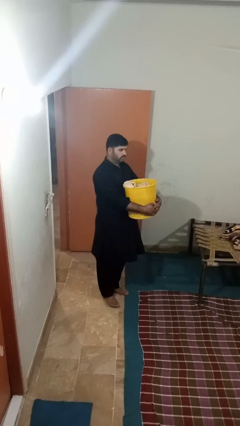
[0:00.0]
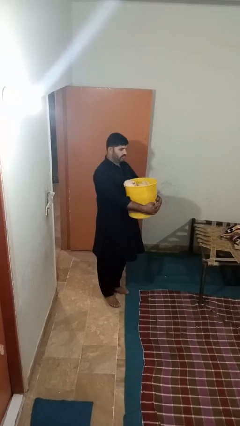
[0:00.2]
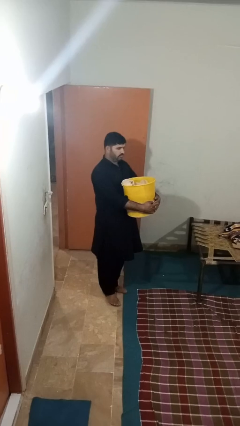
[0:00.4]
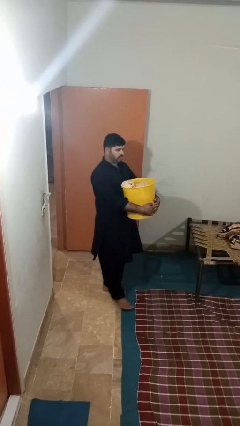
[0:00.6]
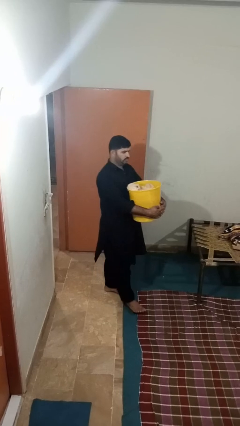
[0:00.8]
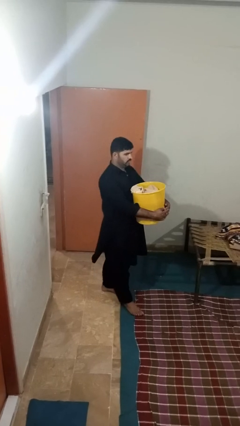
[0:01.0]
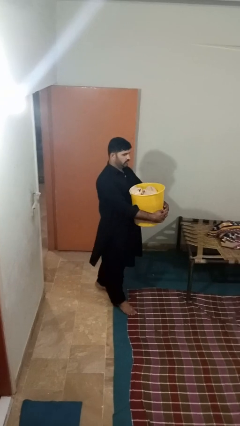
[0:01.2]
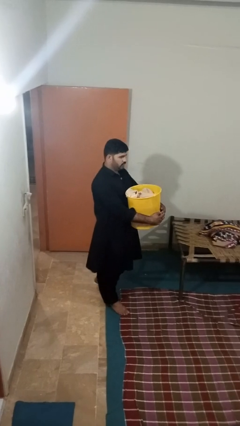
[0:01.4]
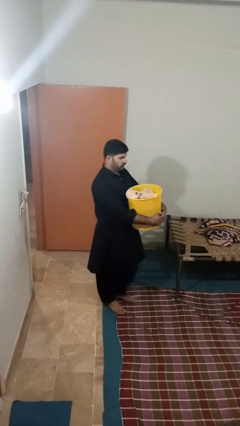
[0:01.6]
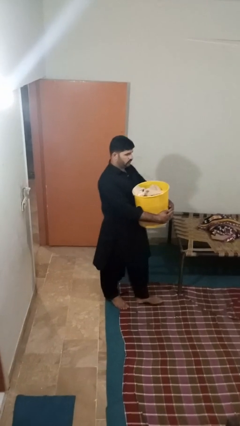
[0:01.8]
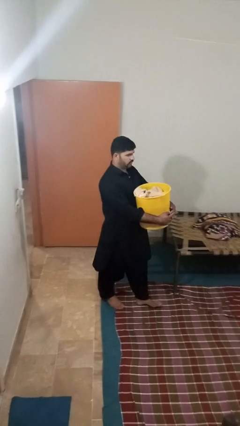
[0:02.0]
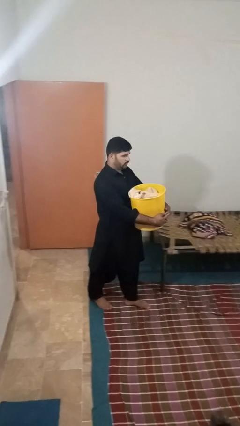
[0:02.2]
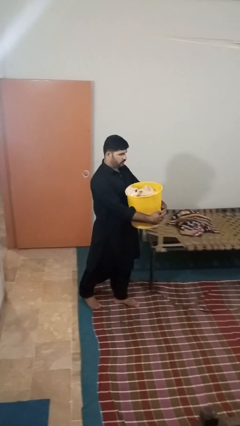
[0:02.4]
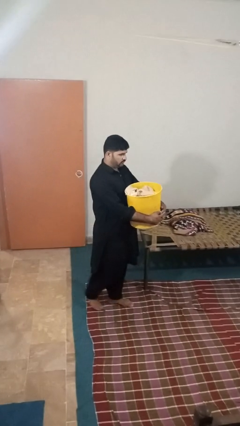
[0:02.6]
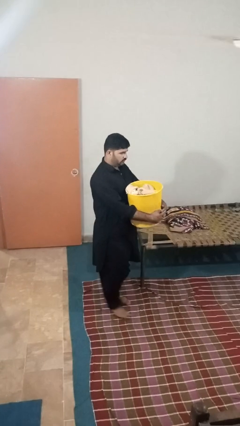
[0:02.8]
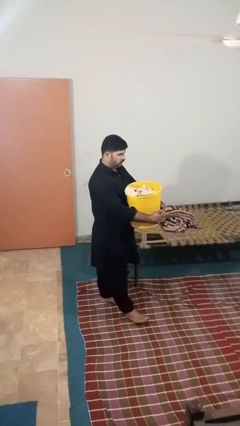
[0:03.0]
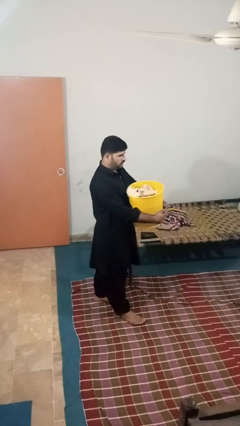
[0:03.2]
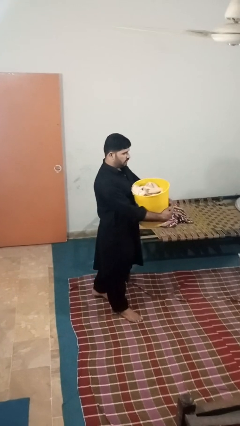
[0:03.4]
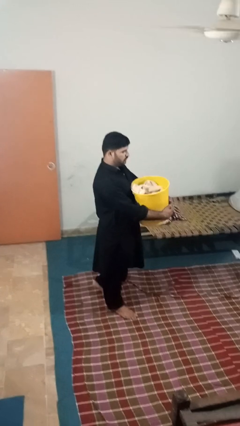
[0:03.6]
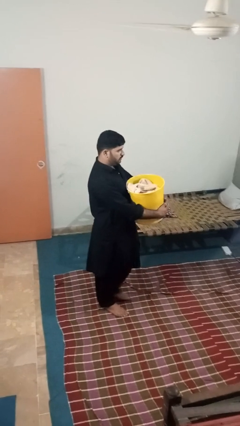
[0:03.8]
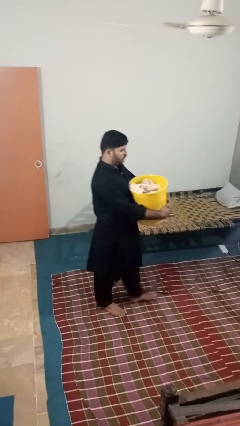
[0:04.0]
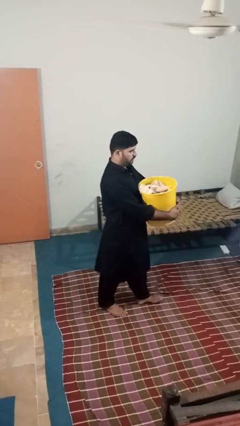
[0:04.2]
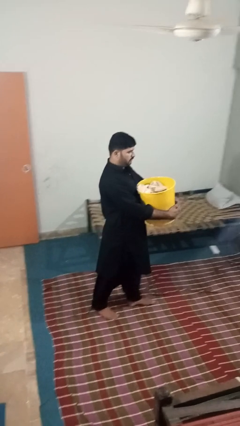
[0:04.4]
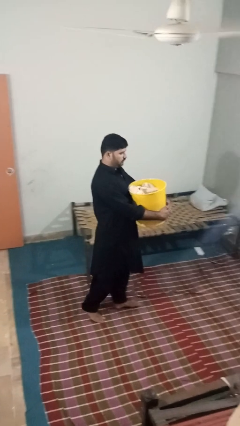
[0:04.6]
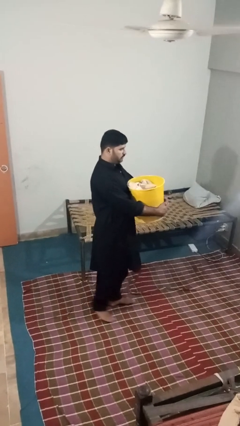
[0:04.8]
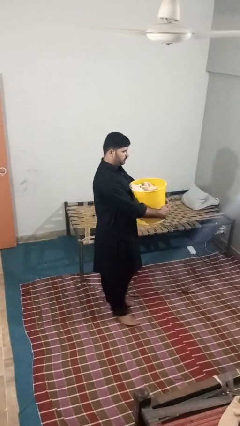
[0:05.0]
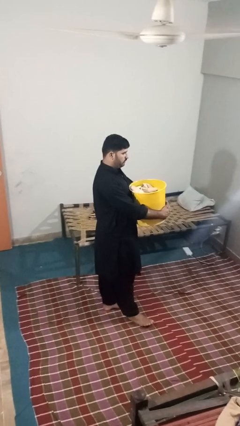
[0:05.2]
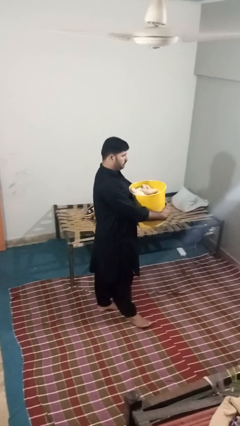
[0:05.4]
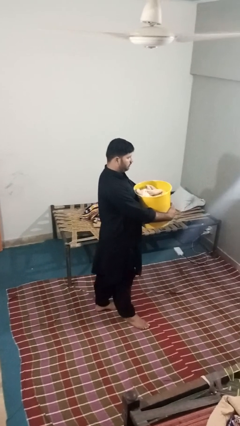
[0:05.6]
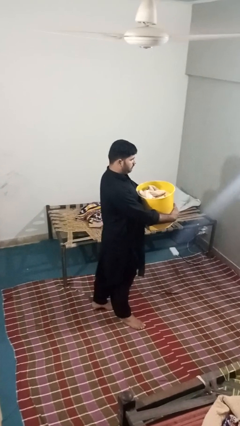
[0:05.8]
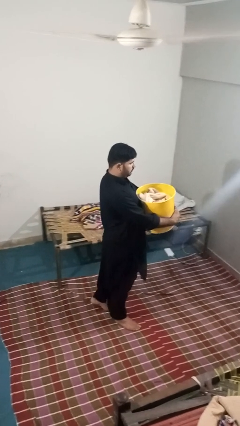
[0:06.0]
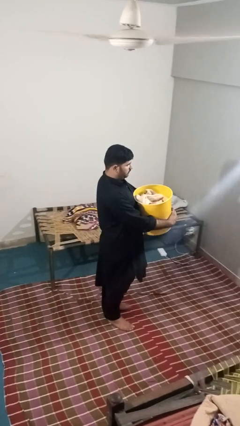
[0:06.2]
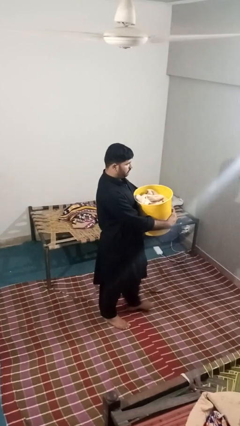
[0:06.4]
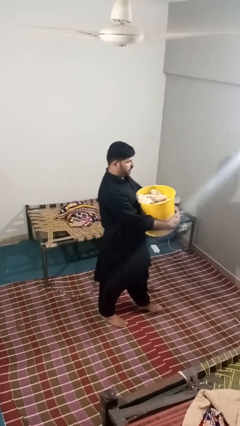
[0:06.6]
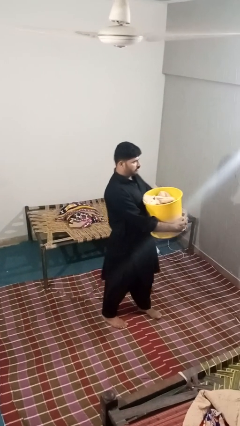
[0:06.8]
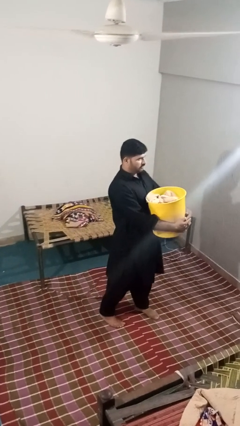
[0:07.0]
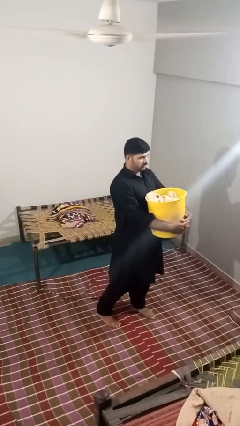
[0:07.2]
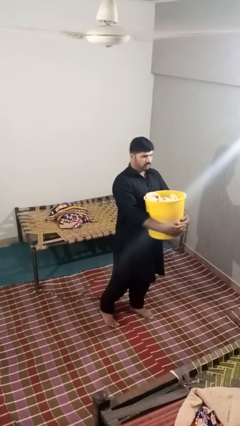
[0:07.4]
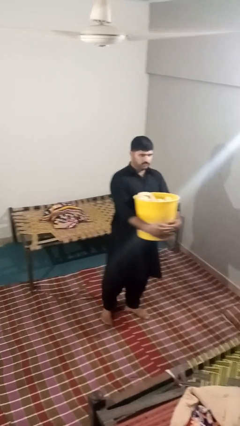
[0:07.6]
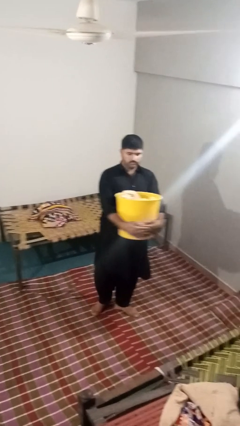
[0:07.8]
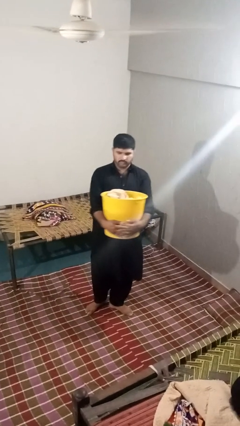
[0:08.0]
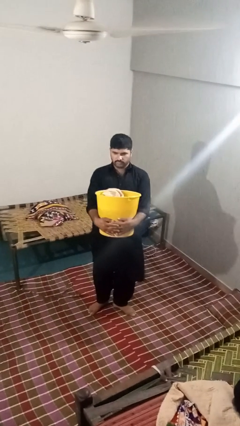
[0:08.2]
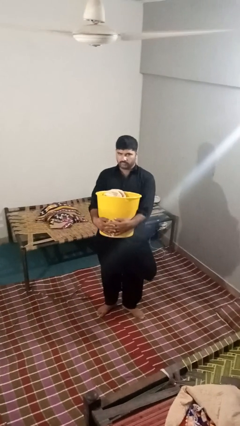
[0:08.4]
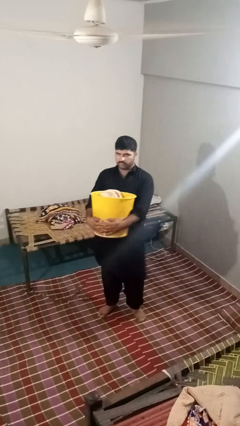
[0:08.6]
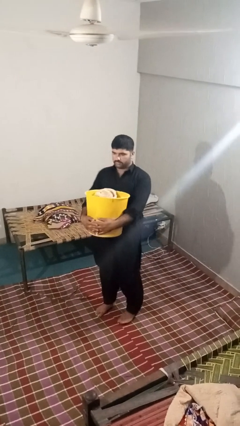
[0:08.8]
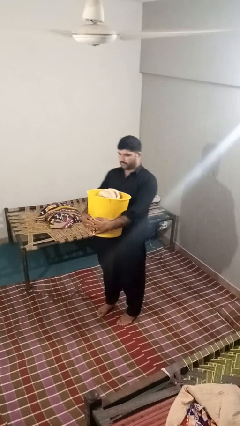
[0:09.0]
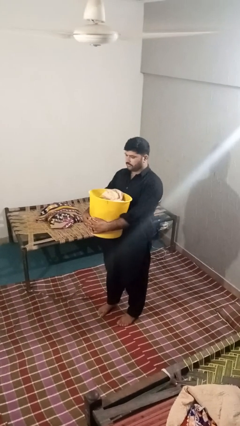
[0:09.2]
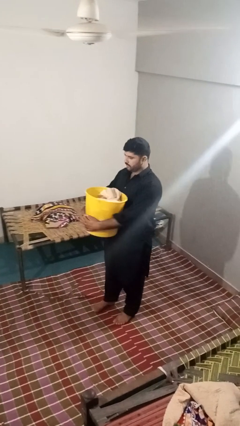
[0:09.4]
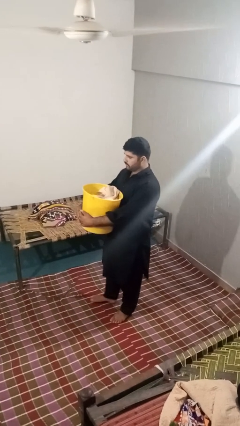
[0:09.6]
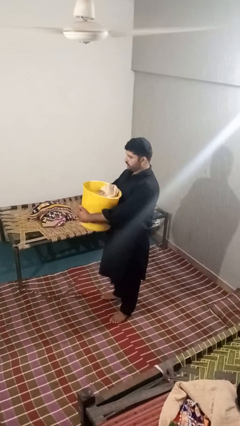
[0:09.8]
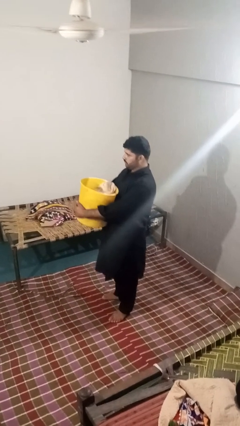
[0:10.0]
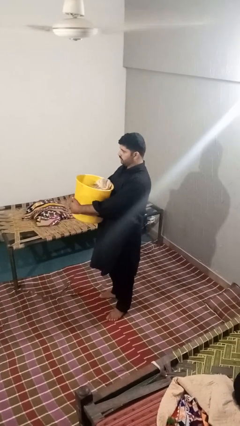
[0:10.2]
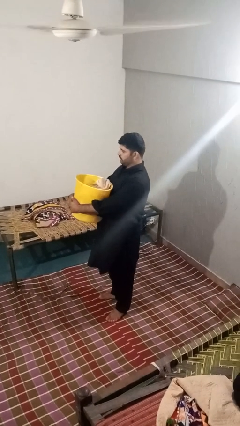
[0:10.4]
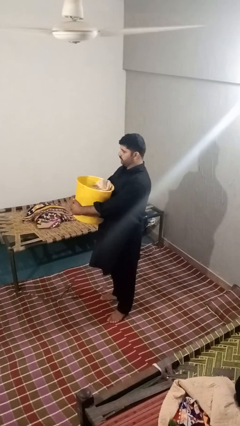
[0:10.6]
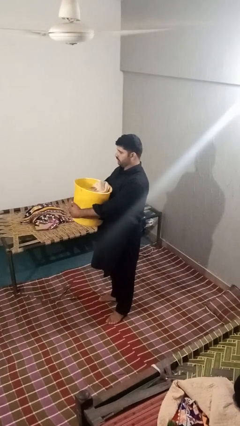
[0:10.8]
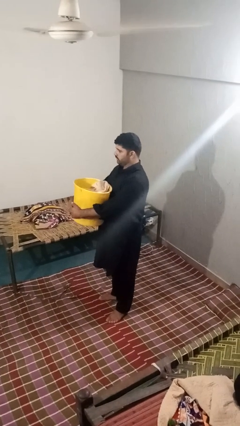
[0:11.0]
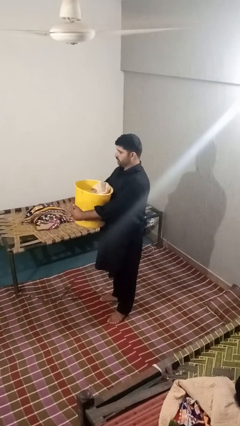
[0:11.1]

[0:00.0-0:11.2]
person carries laundry basket

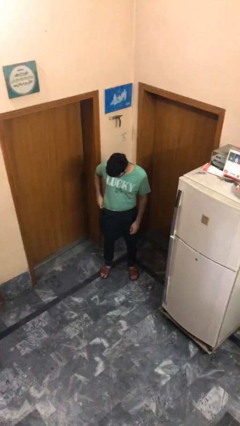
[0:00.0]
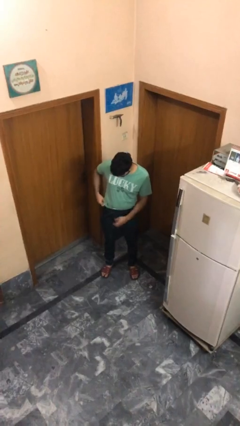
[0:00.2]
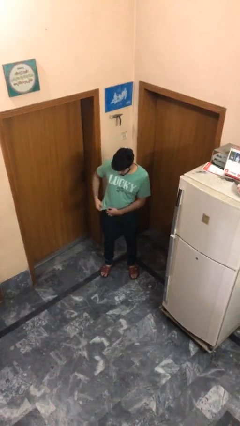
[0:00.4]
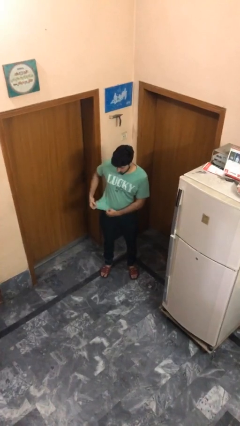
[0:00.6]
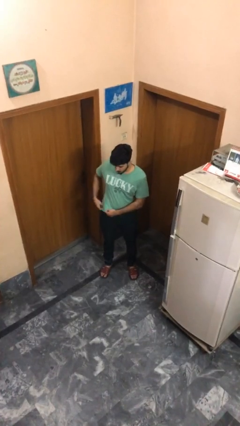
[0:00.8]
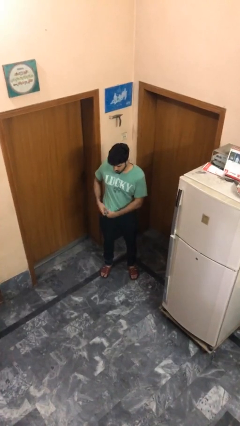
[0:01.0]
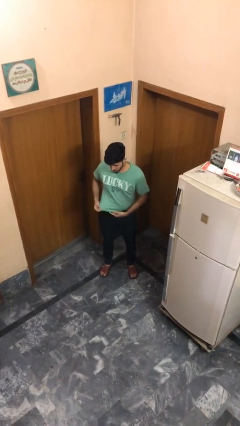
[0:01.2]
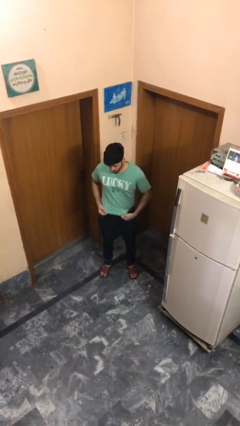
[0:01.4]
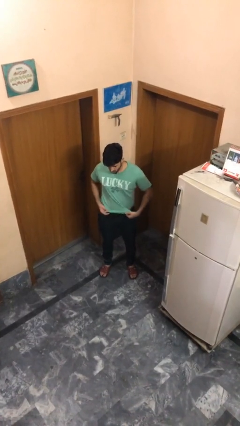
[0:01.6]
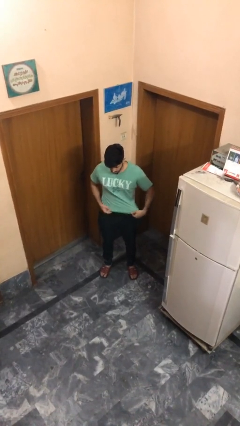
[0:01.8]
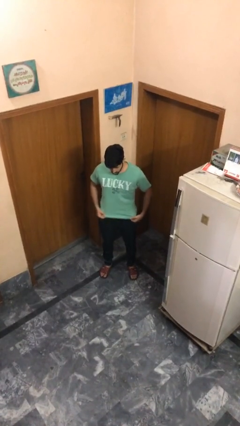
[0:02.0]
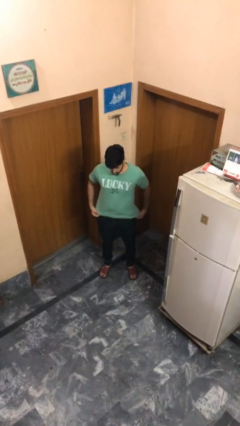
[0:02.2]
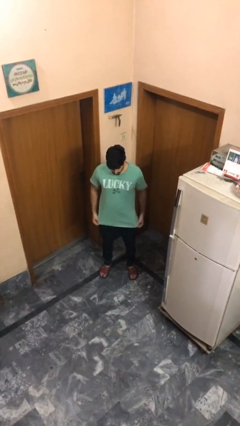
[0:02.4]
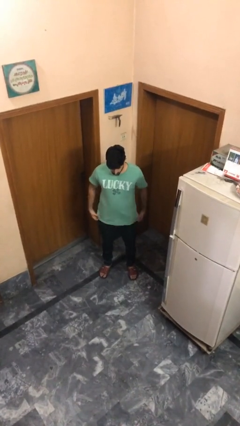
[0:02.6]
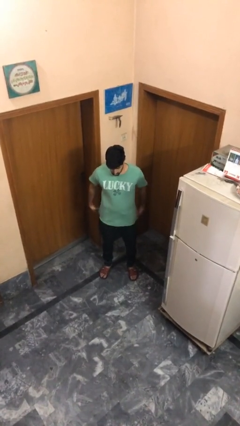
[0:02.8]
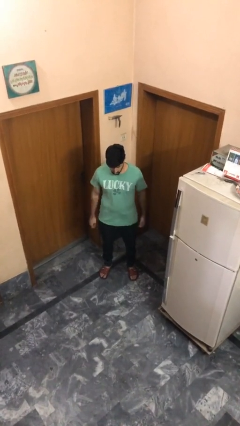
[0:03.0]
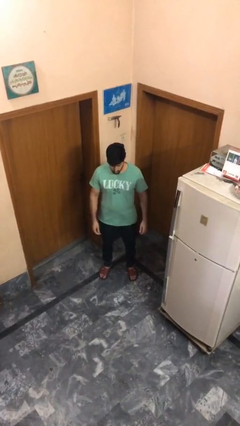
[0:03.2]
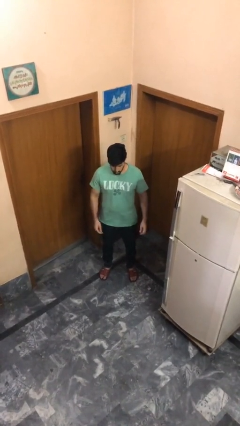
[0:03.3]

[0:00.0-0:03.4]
person untucks shirt

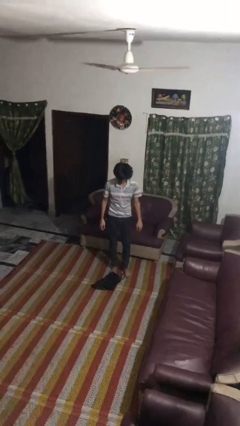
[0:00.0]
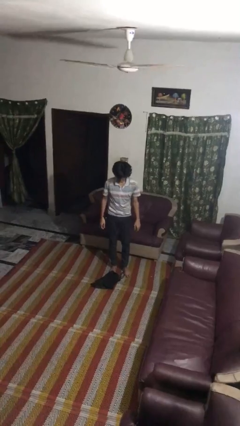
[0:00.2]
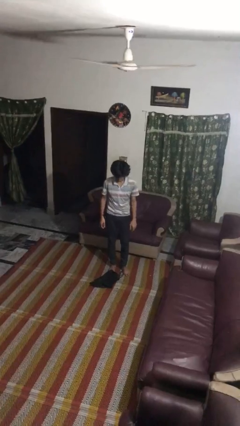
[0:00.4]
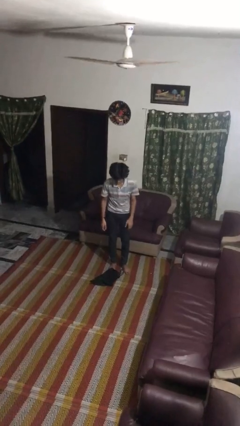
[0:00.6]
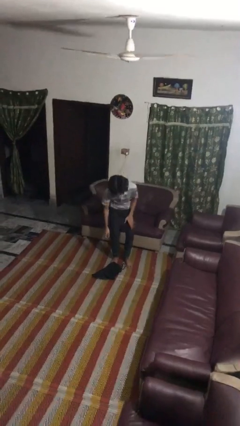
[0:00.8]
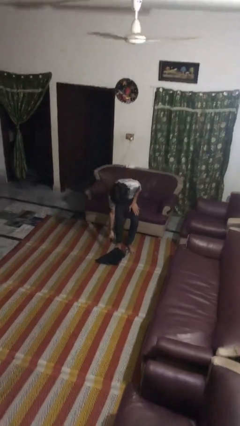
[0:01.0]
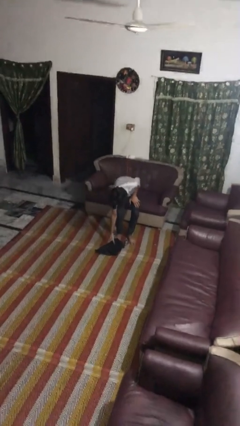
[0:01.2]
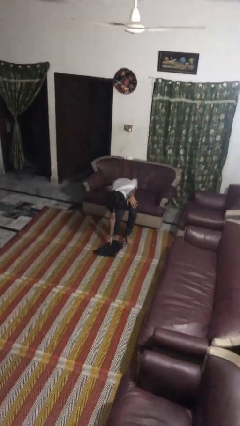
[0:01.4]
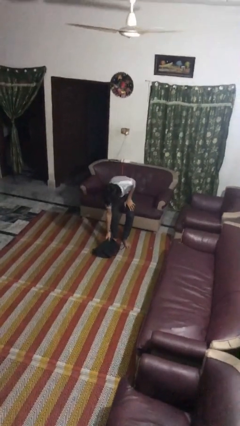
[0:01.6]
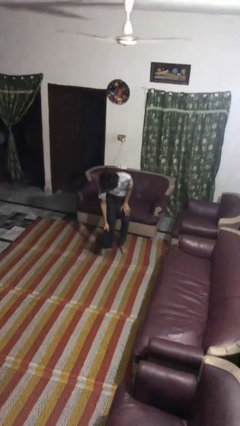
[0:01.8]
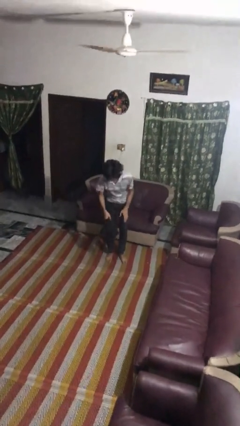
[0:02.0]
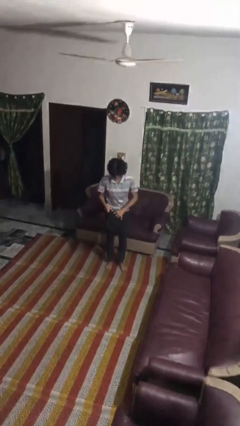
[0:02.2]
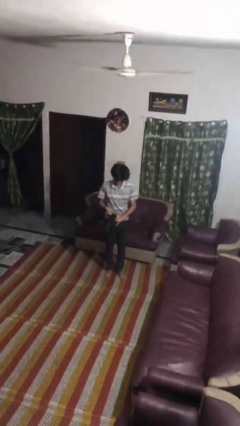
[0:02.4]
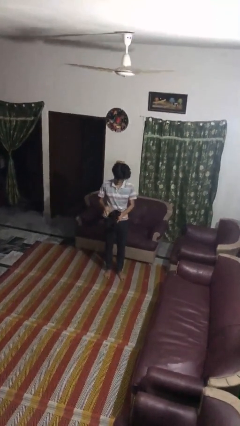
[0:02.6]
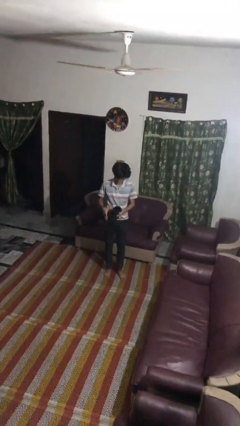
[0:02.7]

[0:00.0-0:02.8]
person picks up object from floor

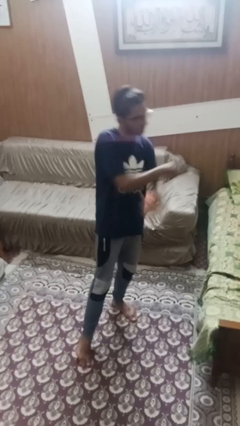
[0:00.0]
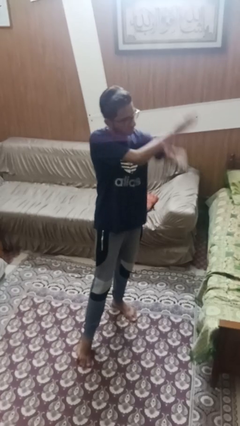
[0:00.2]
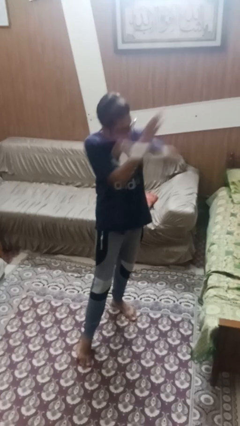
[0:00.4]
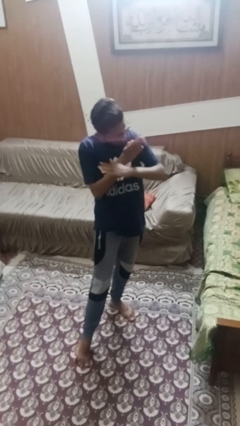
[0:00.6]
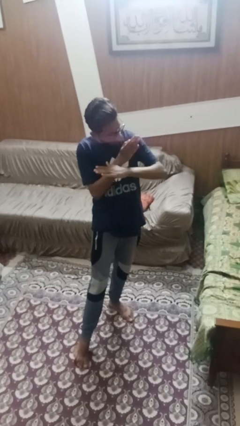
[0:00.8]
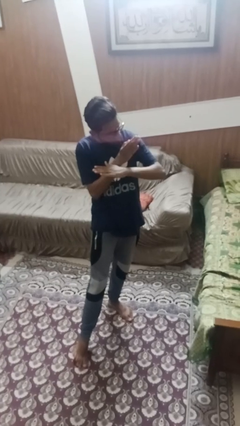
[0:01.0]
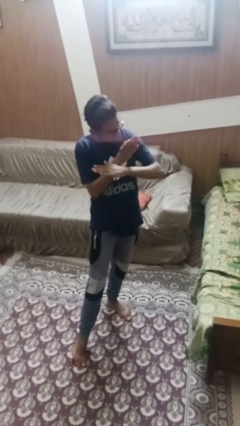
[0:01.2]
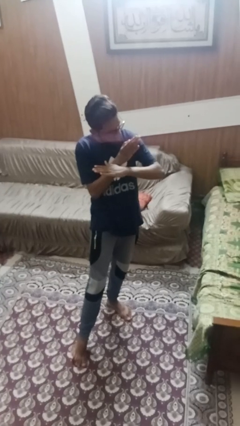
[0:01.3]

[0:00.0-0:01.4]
person karate chop
